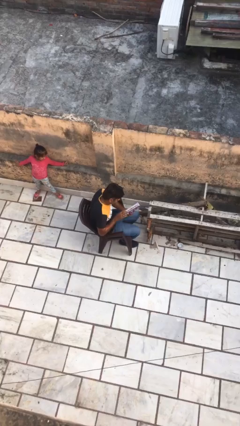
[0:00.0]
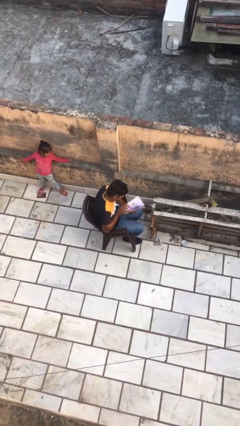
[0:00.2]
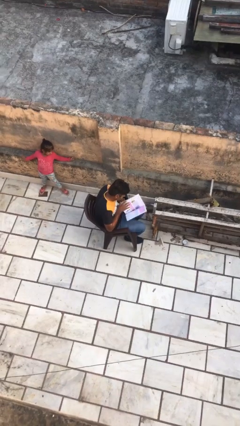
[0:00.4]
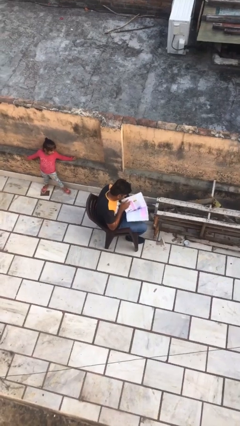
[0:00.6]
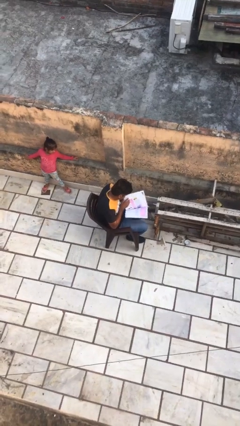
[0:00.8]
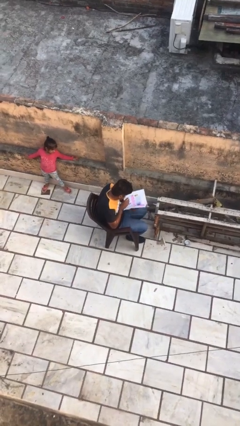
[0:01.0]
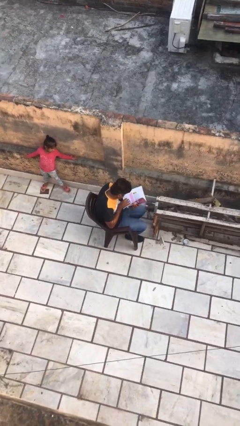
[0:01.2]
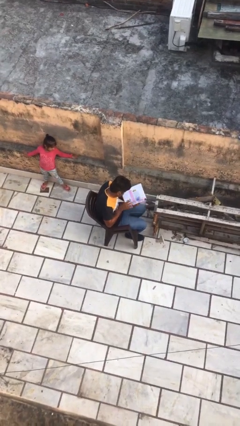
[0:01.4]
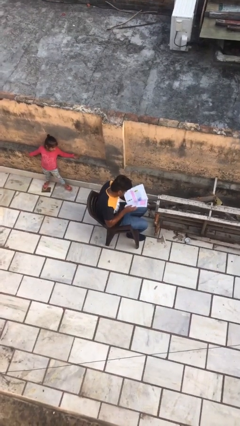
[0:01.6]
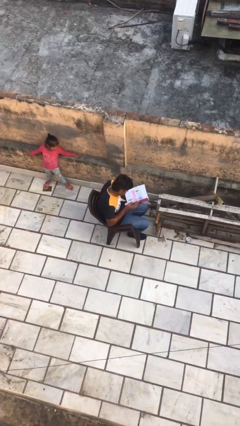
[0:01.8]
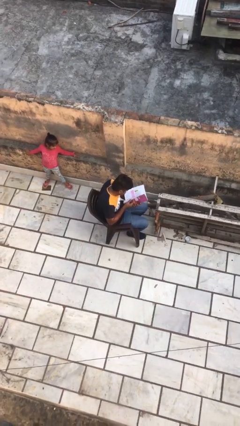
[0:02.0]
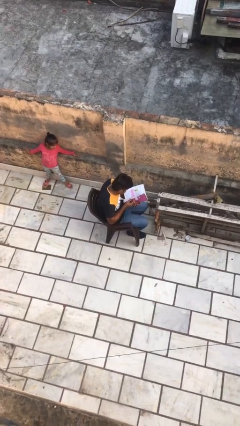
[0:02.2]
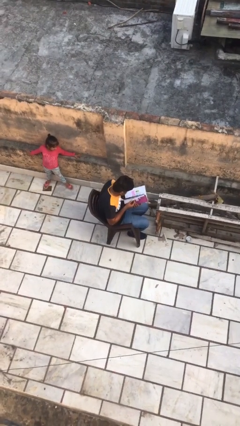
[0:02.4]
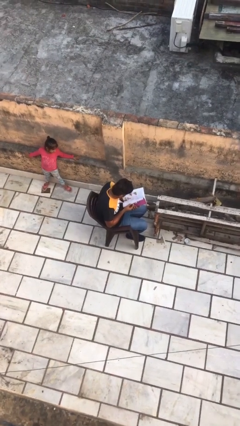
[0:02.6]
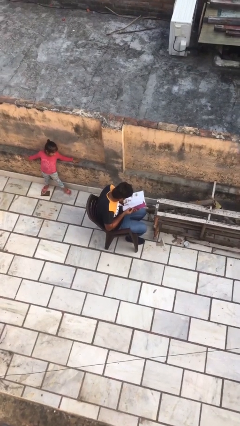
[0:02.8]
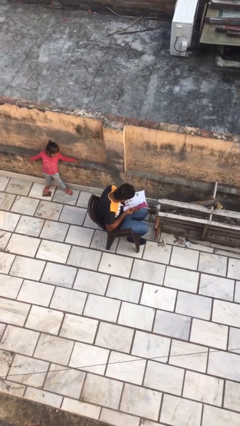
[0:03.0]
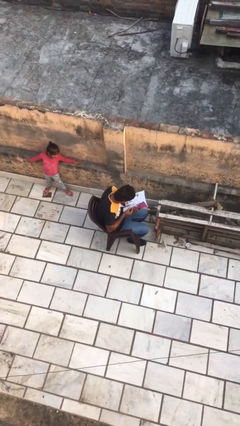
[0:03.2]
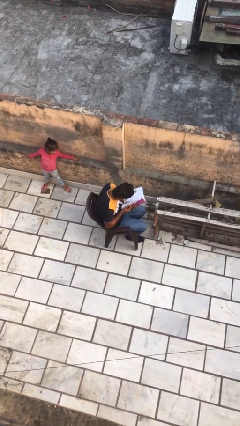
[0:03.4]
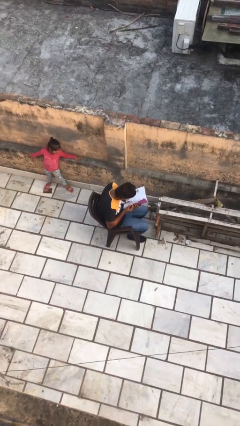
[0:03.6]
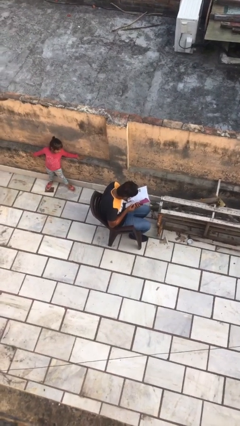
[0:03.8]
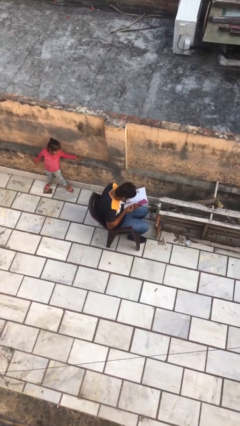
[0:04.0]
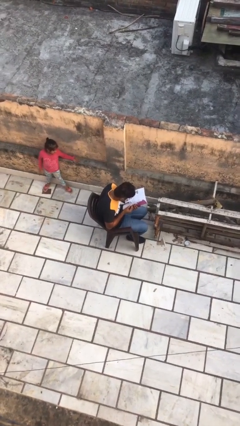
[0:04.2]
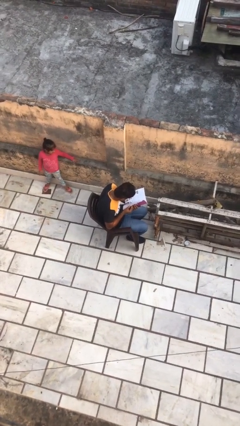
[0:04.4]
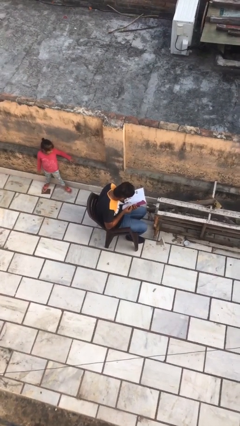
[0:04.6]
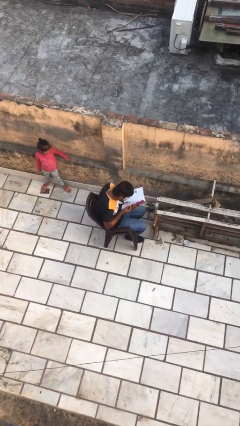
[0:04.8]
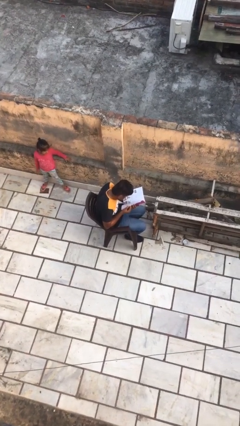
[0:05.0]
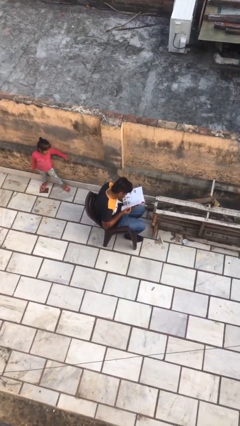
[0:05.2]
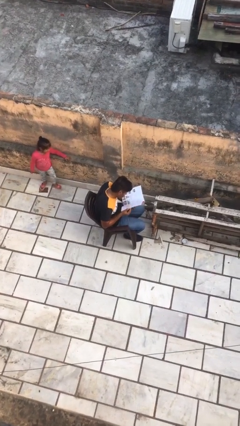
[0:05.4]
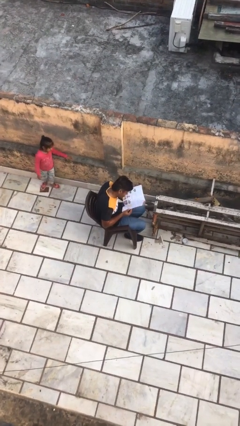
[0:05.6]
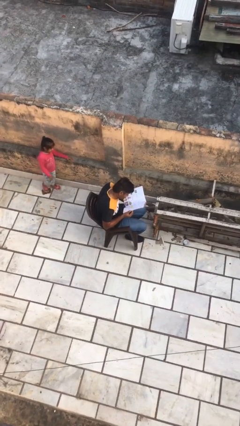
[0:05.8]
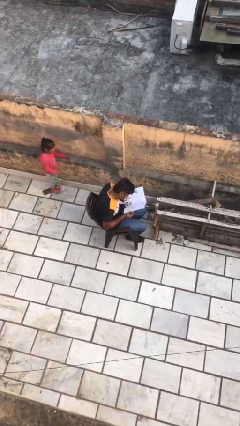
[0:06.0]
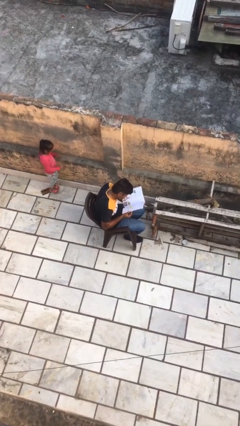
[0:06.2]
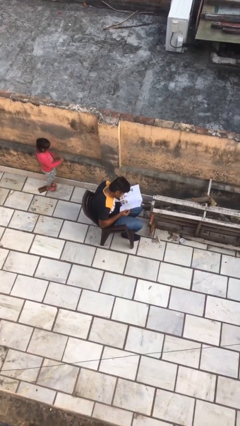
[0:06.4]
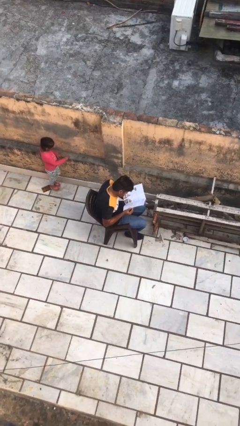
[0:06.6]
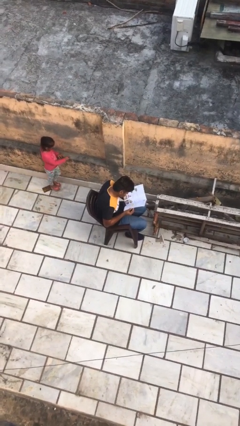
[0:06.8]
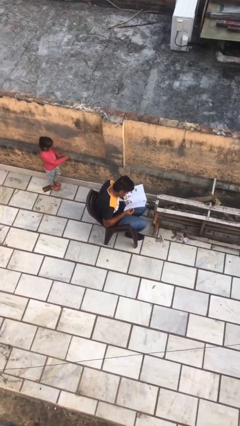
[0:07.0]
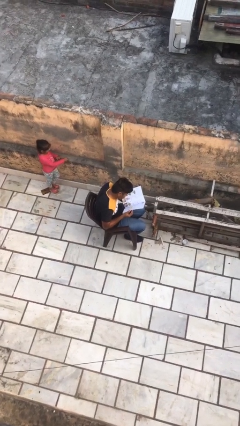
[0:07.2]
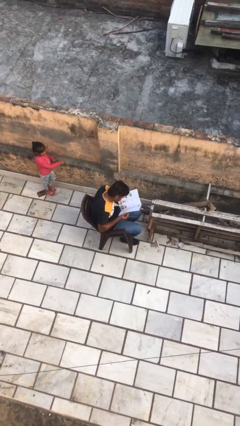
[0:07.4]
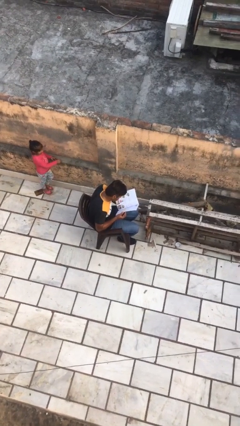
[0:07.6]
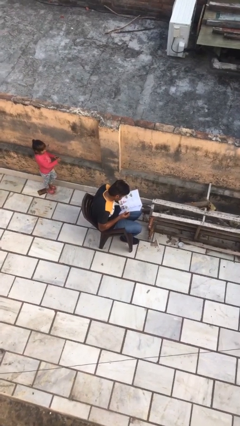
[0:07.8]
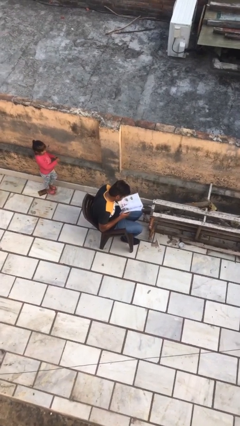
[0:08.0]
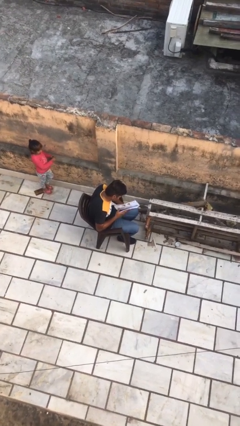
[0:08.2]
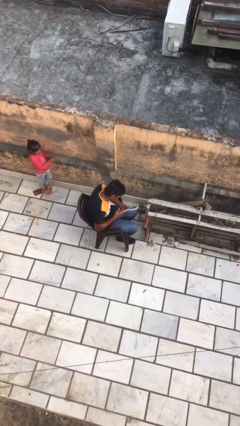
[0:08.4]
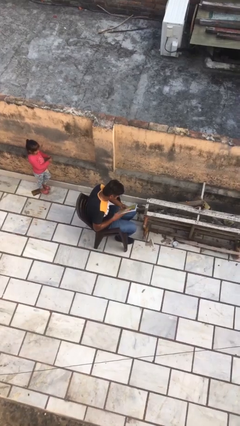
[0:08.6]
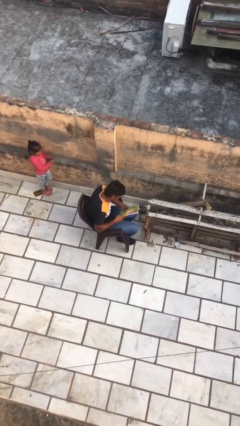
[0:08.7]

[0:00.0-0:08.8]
person reads document

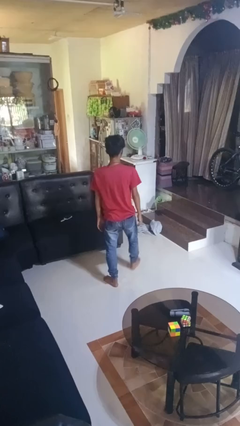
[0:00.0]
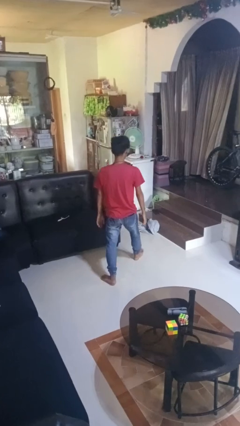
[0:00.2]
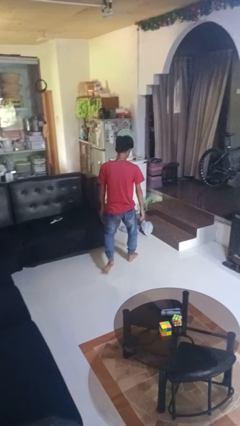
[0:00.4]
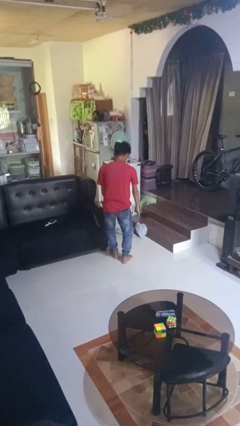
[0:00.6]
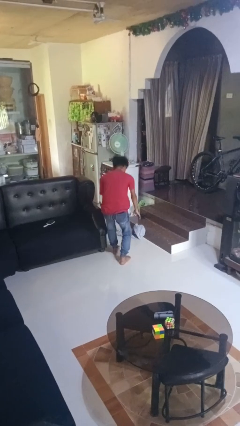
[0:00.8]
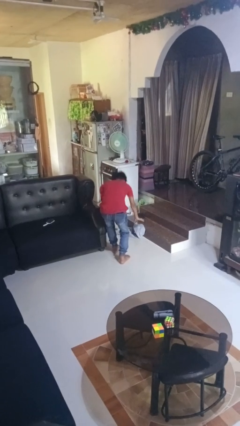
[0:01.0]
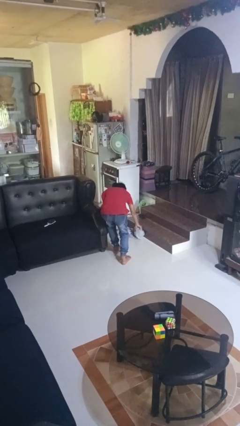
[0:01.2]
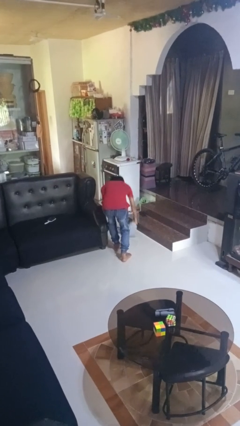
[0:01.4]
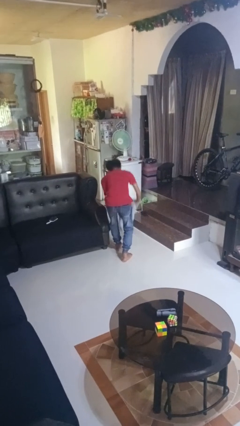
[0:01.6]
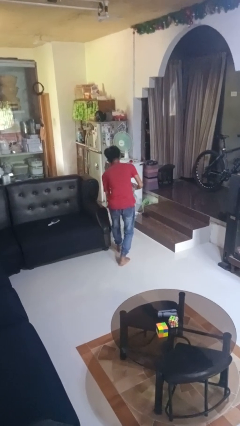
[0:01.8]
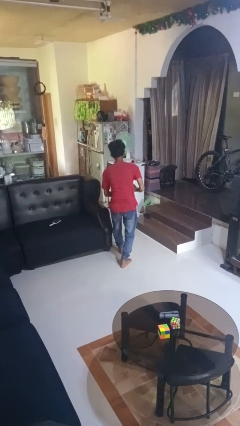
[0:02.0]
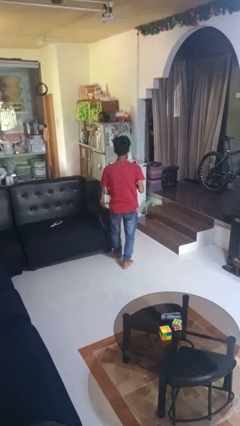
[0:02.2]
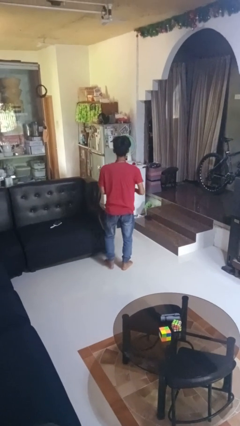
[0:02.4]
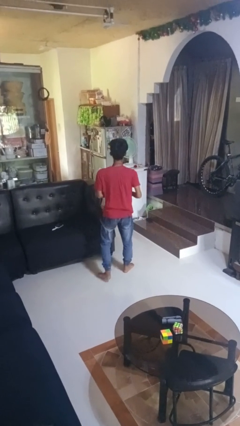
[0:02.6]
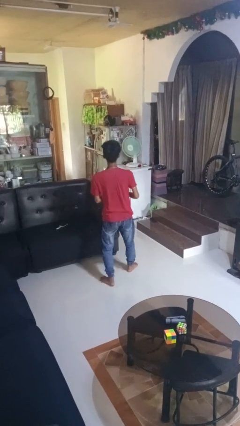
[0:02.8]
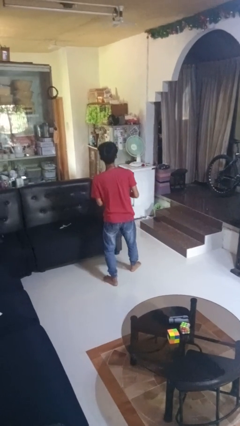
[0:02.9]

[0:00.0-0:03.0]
person picks up object from floor

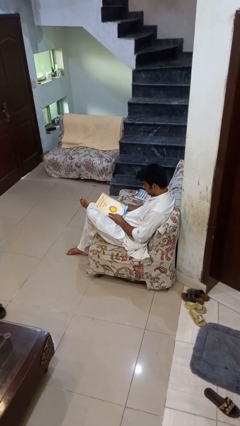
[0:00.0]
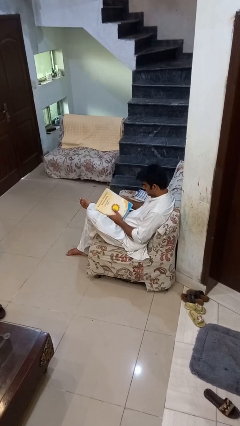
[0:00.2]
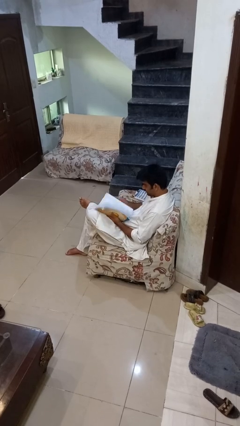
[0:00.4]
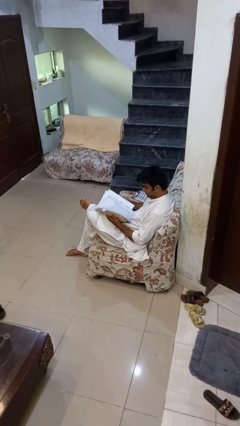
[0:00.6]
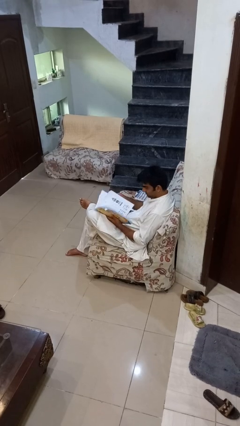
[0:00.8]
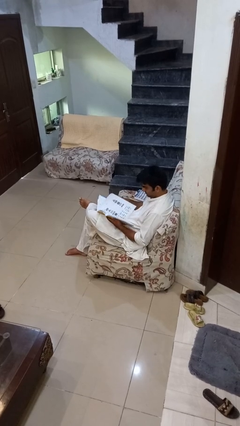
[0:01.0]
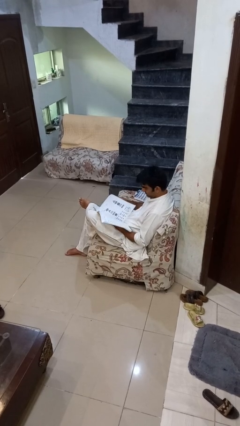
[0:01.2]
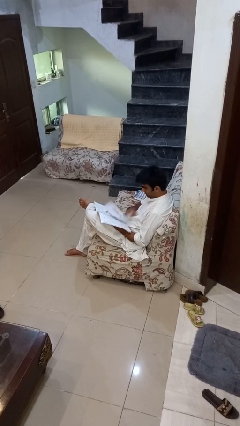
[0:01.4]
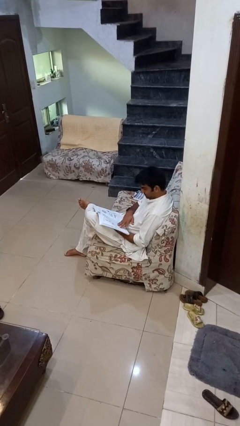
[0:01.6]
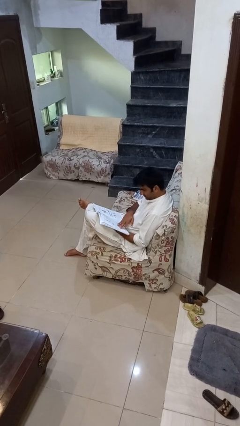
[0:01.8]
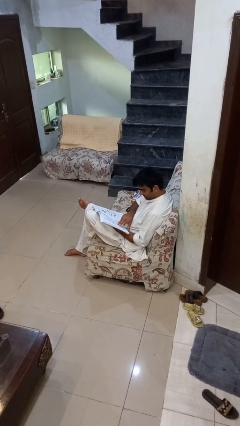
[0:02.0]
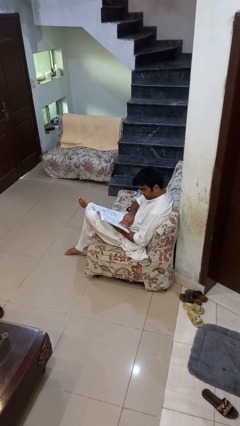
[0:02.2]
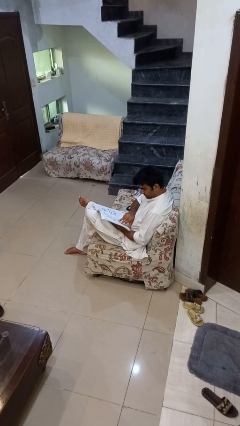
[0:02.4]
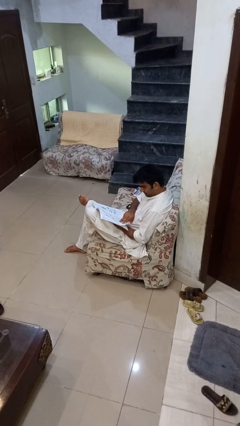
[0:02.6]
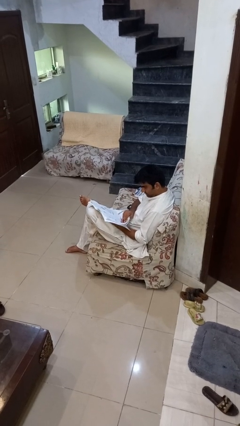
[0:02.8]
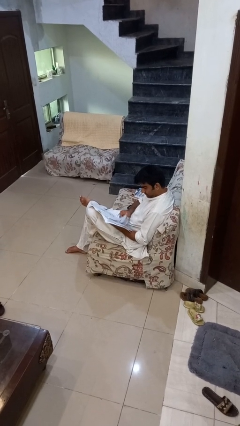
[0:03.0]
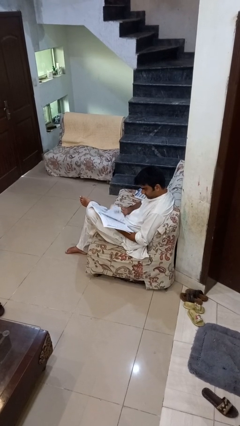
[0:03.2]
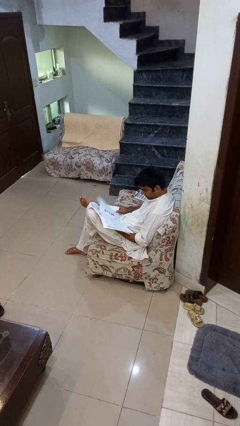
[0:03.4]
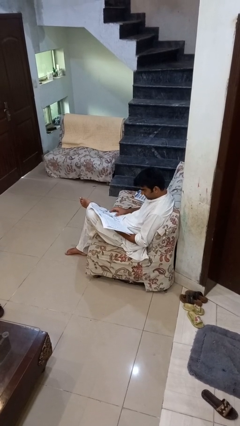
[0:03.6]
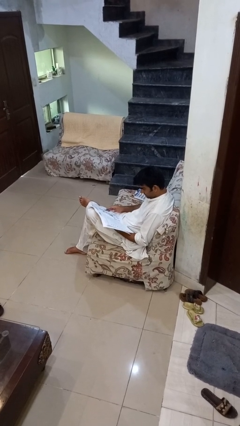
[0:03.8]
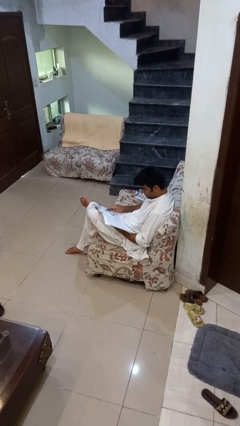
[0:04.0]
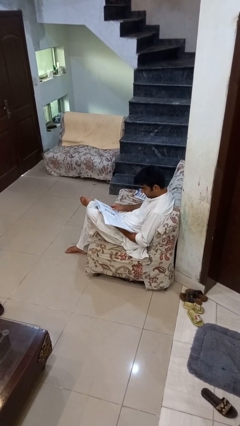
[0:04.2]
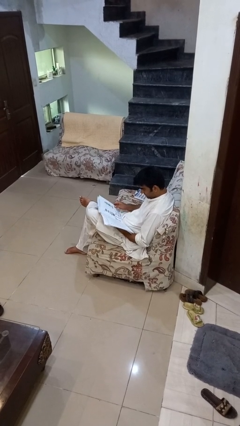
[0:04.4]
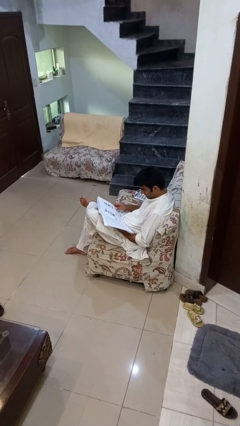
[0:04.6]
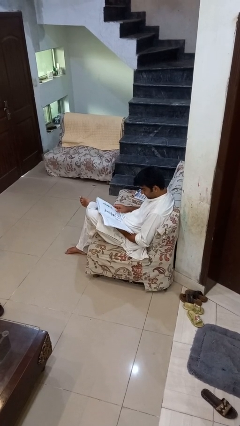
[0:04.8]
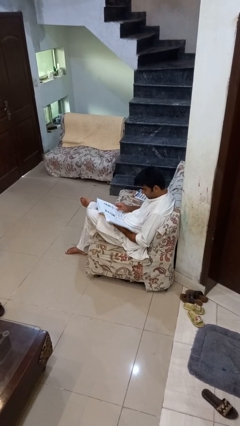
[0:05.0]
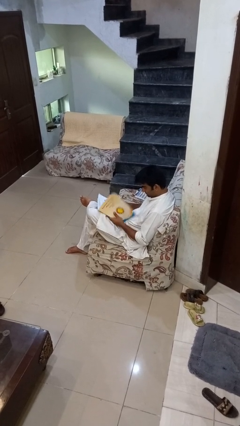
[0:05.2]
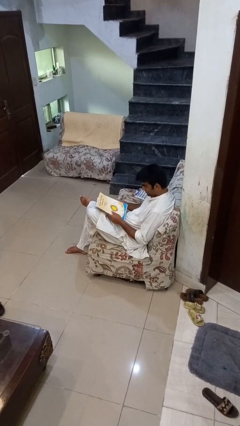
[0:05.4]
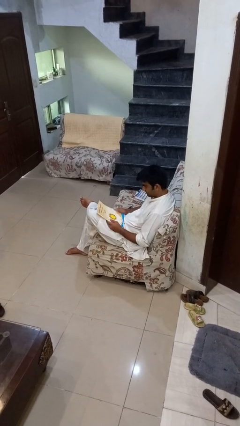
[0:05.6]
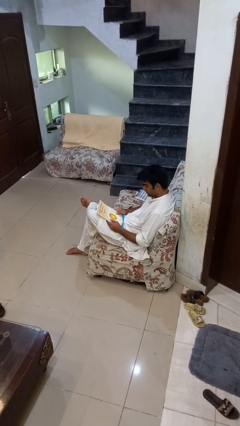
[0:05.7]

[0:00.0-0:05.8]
person reads book
